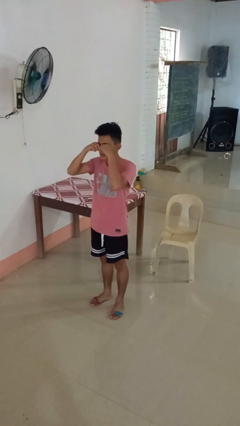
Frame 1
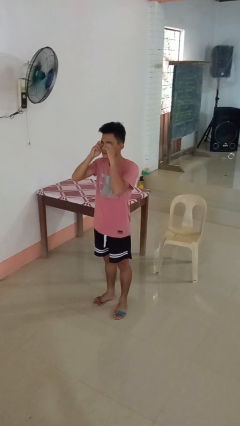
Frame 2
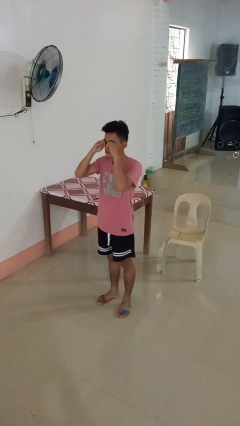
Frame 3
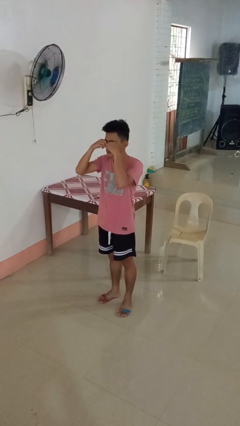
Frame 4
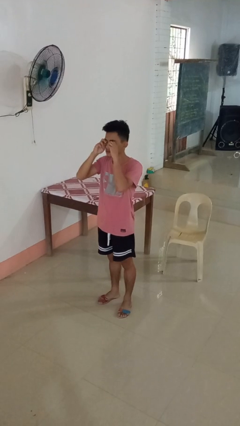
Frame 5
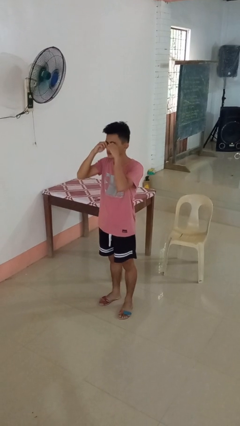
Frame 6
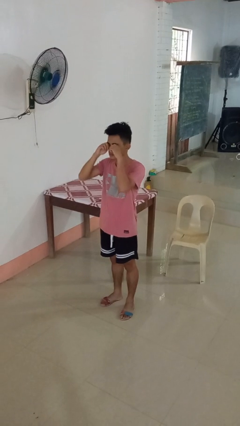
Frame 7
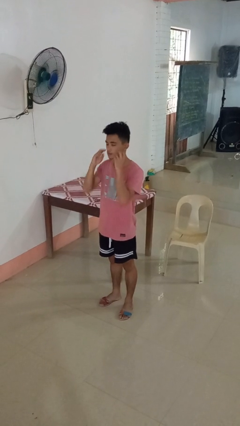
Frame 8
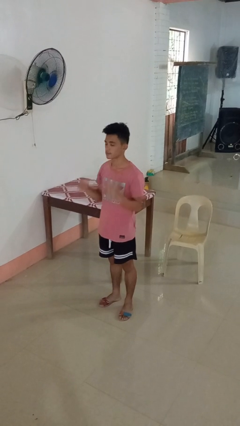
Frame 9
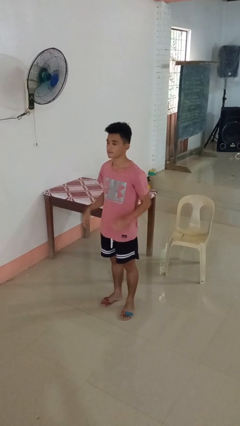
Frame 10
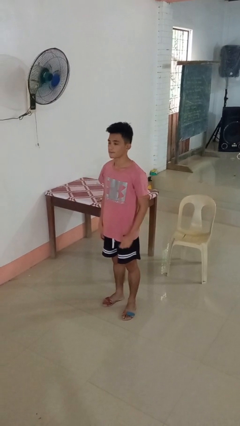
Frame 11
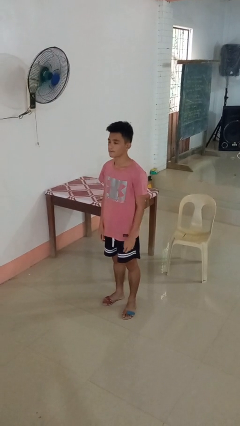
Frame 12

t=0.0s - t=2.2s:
person rubs eyes

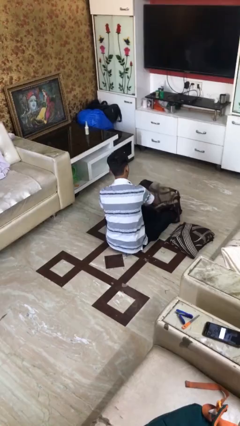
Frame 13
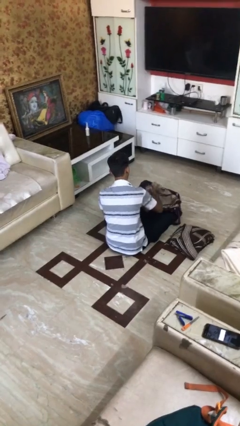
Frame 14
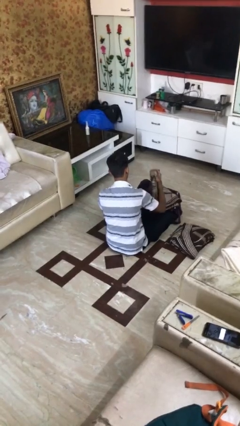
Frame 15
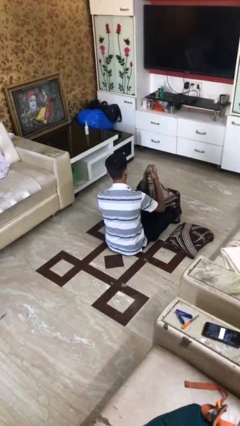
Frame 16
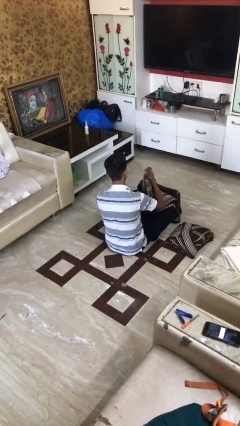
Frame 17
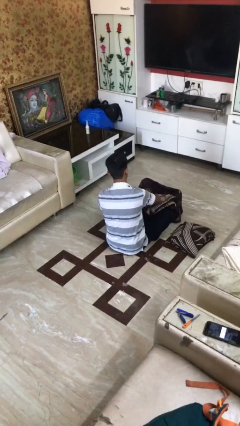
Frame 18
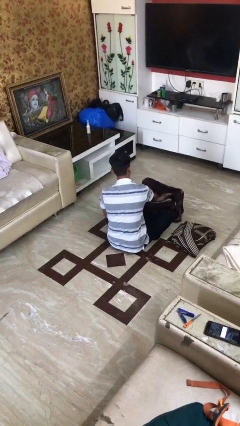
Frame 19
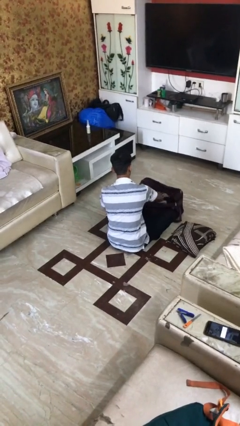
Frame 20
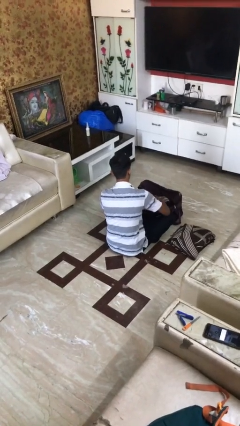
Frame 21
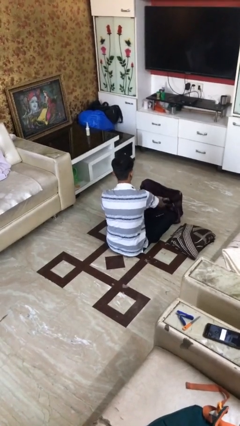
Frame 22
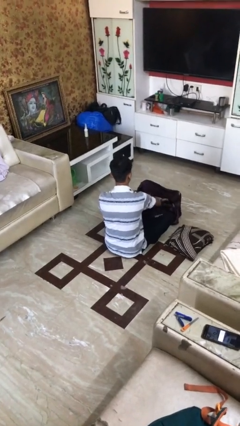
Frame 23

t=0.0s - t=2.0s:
person loads clothes into suitcase

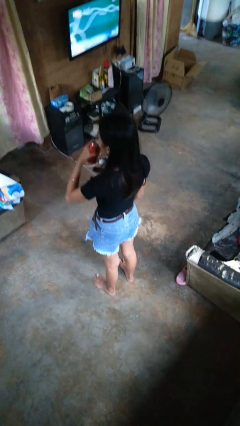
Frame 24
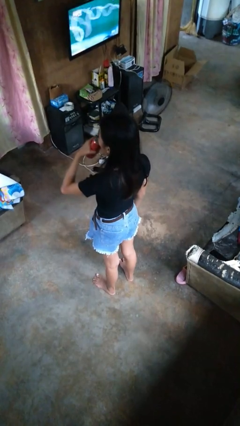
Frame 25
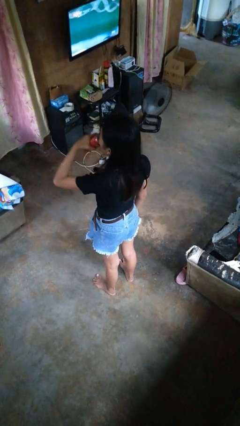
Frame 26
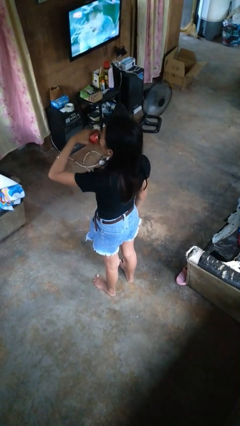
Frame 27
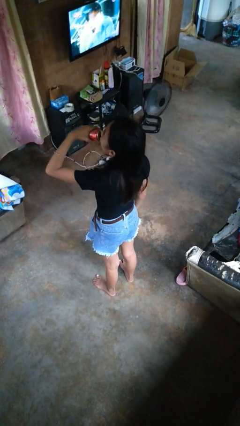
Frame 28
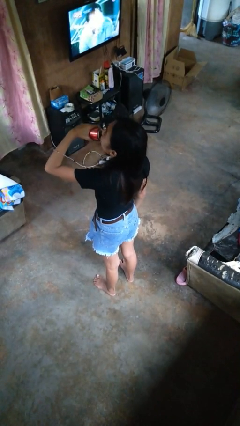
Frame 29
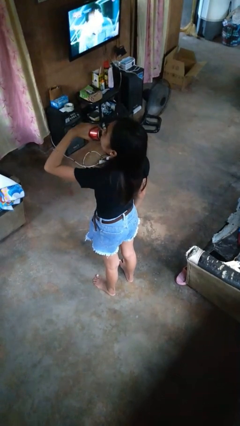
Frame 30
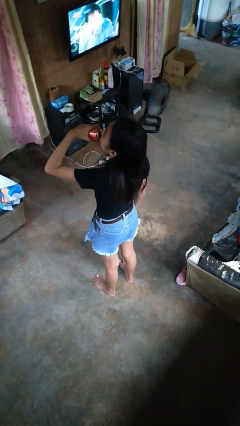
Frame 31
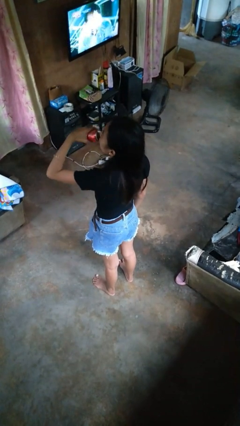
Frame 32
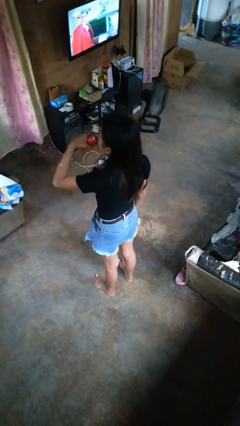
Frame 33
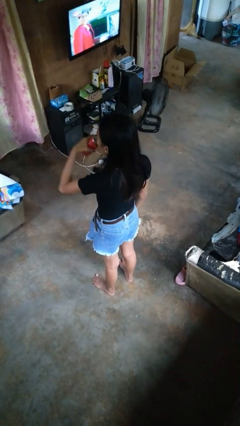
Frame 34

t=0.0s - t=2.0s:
person drinks from beverage can

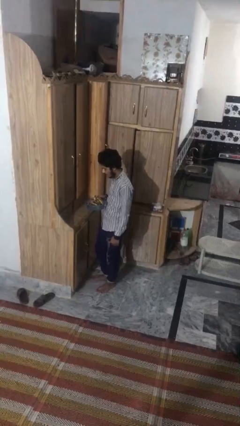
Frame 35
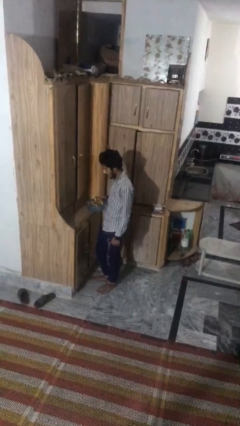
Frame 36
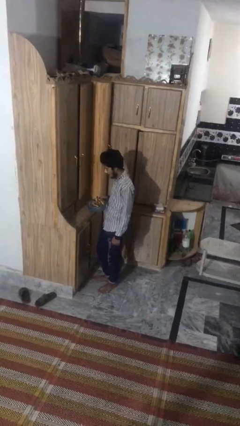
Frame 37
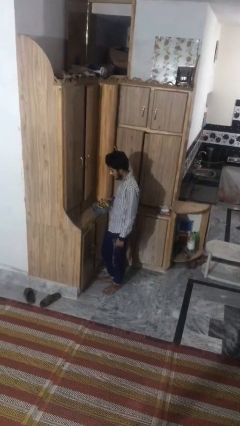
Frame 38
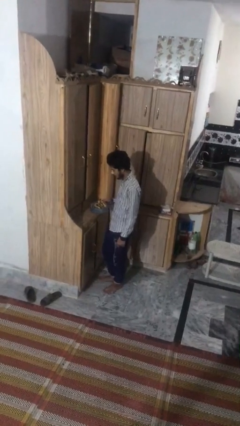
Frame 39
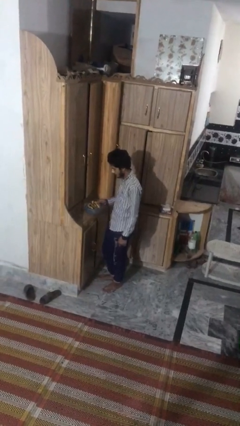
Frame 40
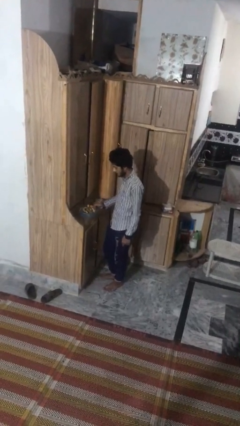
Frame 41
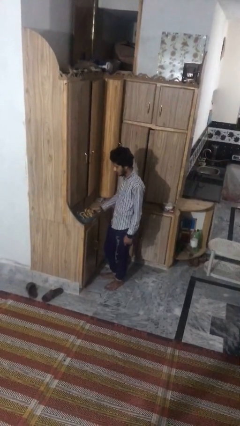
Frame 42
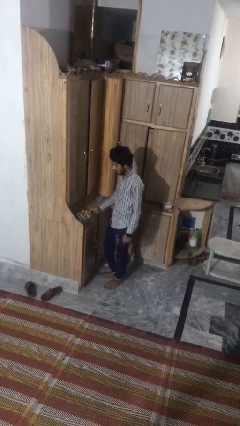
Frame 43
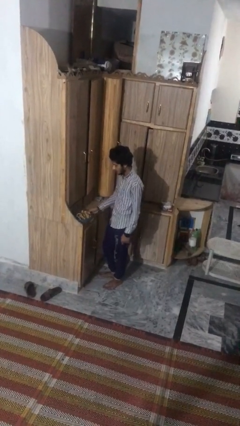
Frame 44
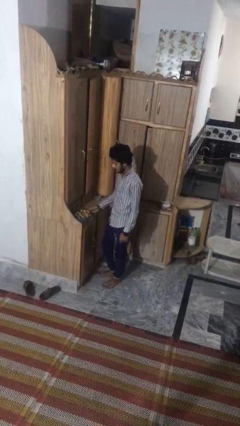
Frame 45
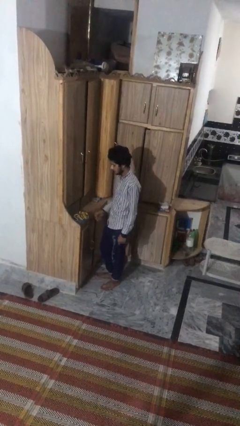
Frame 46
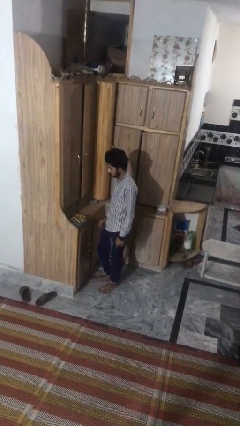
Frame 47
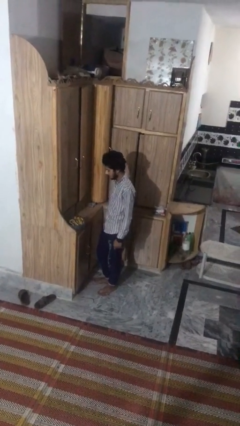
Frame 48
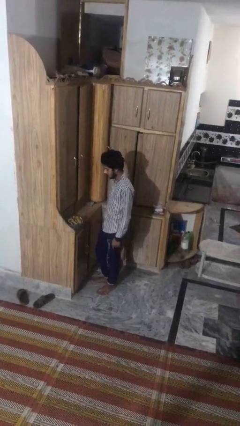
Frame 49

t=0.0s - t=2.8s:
person puts down object on countertop

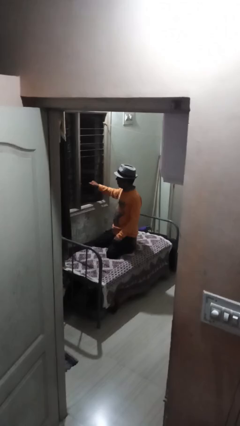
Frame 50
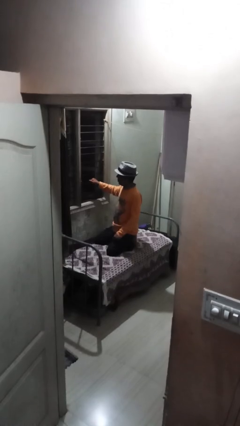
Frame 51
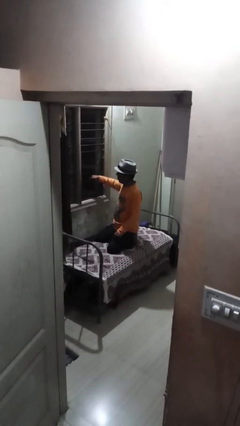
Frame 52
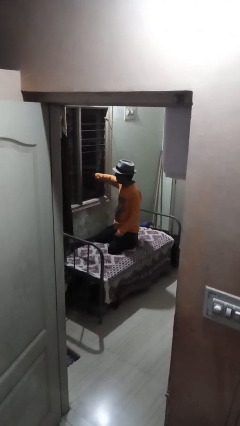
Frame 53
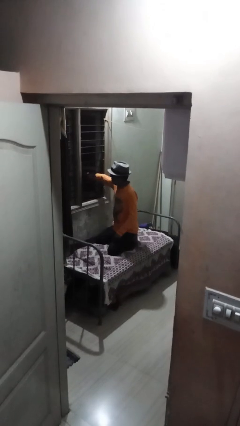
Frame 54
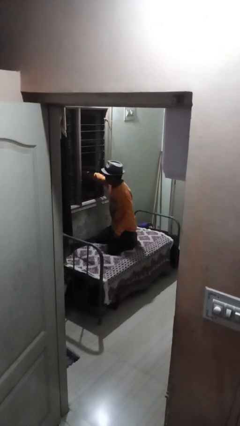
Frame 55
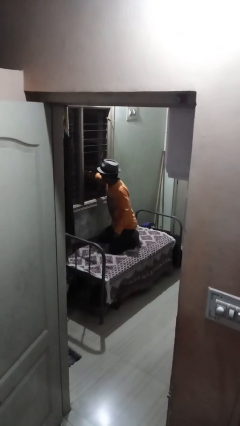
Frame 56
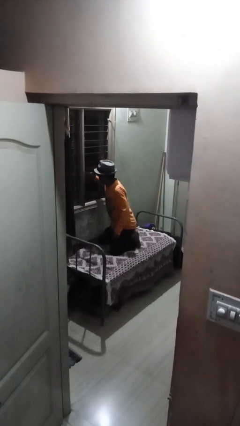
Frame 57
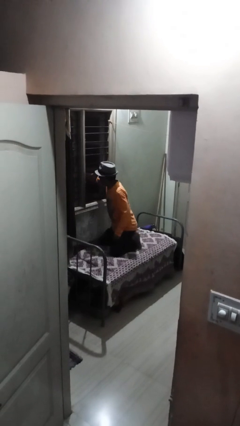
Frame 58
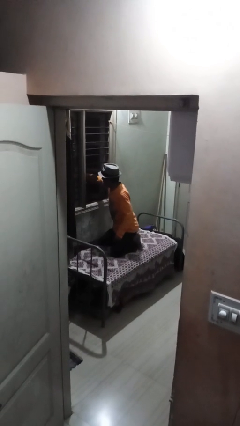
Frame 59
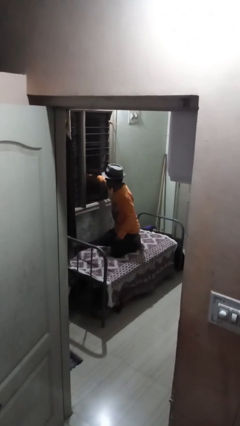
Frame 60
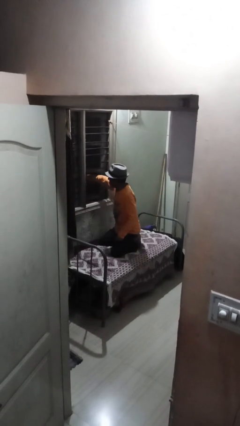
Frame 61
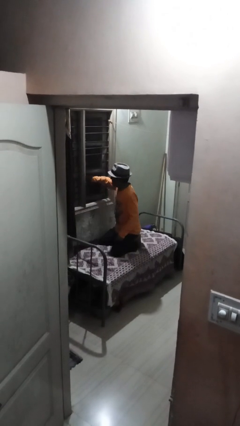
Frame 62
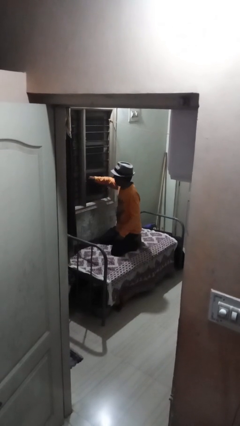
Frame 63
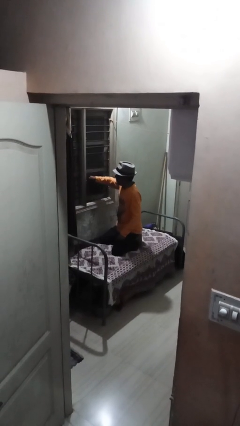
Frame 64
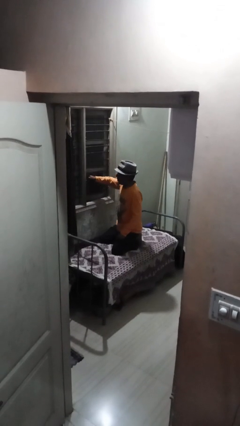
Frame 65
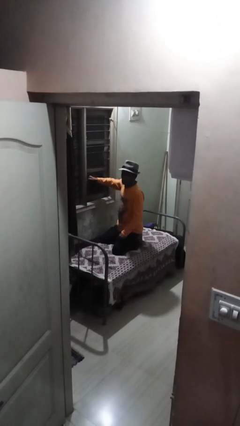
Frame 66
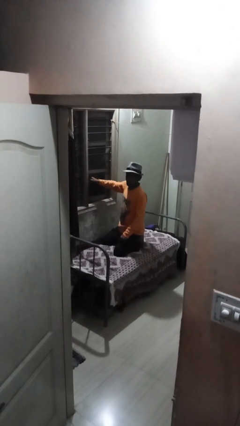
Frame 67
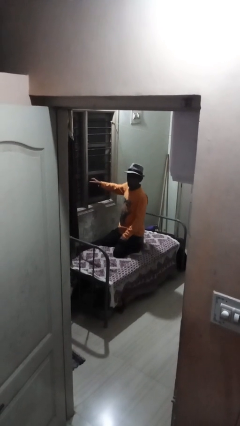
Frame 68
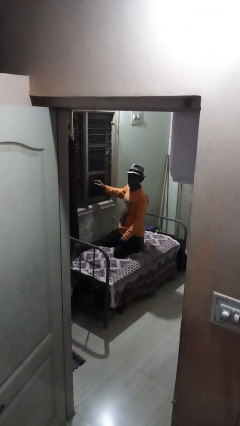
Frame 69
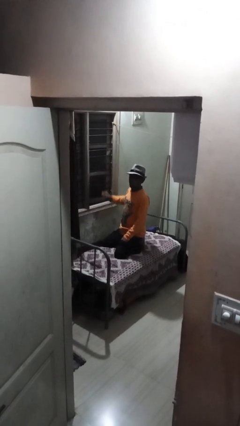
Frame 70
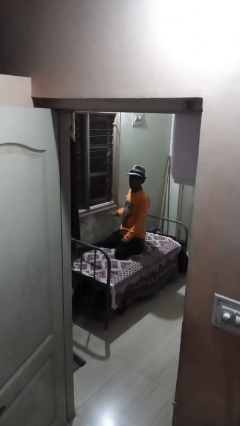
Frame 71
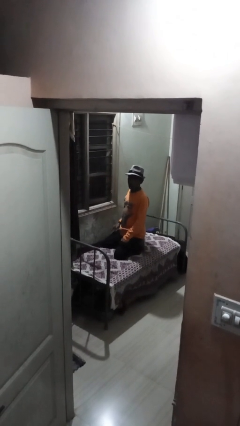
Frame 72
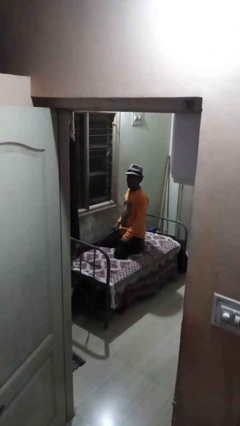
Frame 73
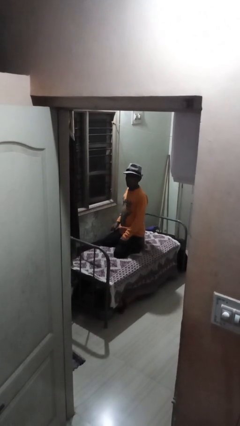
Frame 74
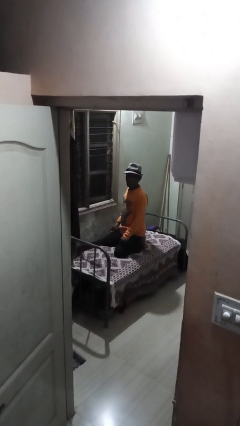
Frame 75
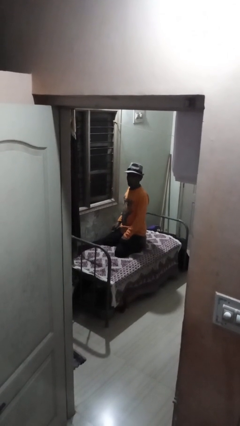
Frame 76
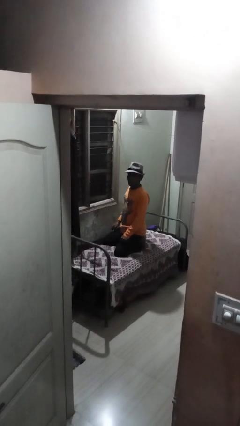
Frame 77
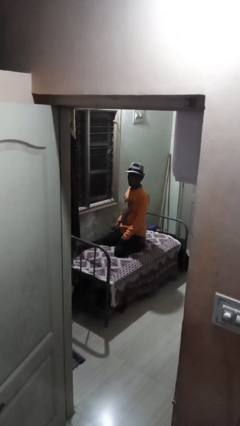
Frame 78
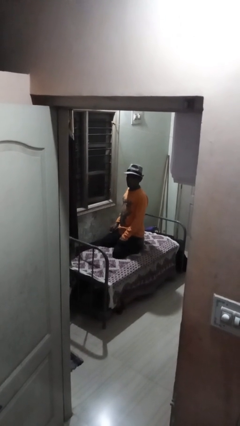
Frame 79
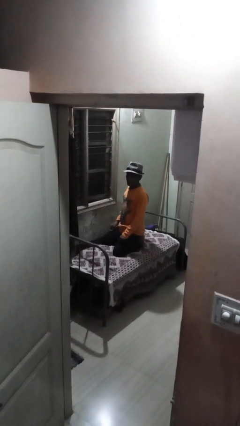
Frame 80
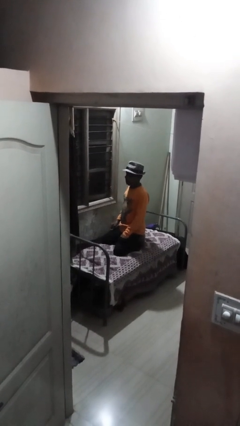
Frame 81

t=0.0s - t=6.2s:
person closes home window

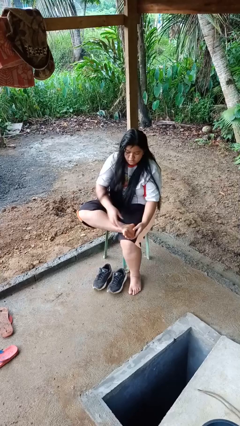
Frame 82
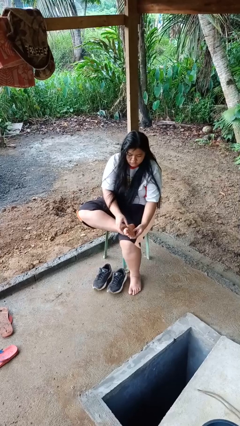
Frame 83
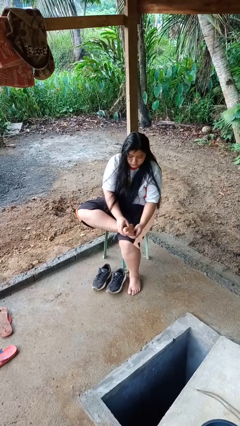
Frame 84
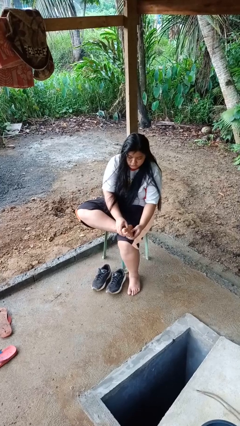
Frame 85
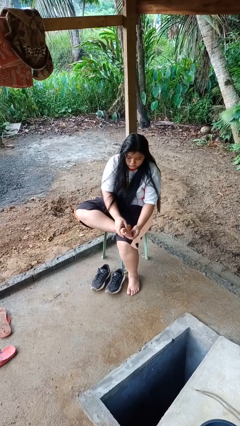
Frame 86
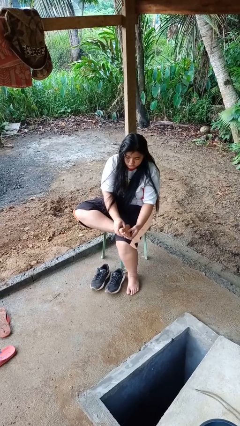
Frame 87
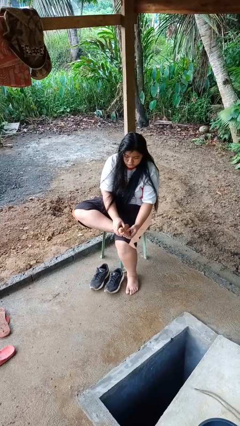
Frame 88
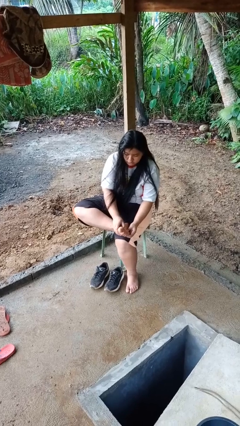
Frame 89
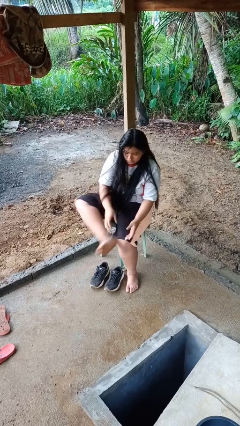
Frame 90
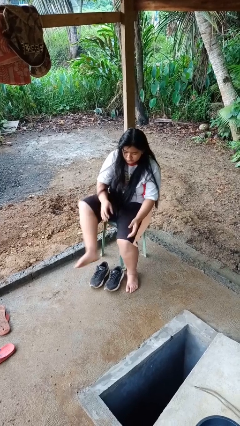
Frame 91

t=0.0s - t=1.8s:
person rubs foot
